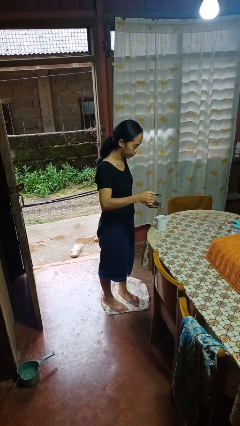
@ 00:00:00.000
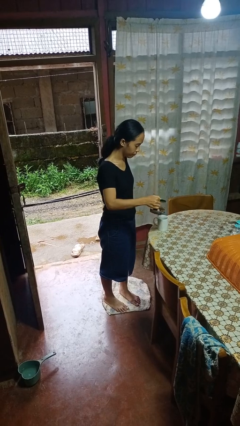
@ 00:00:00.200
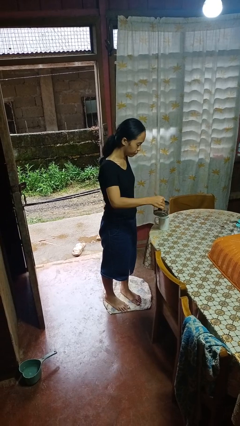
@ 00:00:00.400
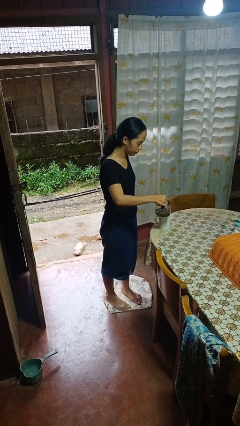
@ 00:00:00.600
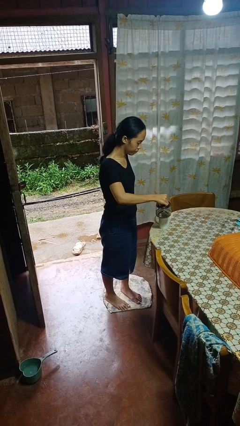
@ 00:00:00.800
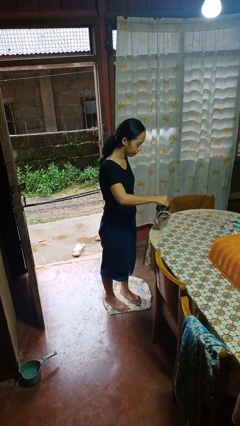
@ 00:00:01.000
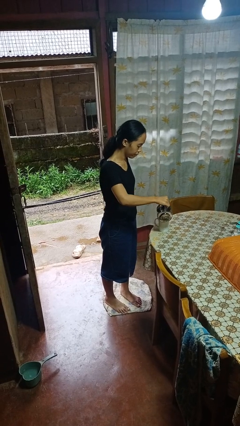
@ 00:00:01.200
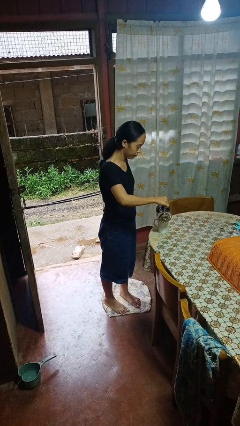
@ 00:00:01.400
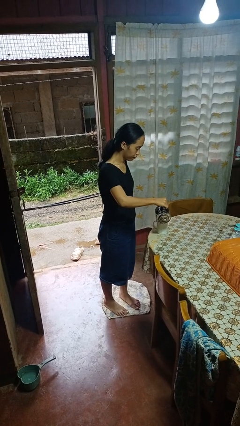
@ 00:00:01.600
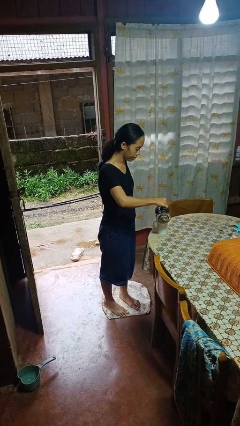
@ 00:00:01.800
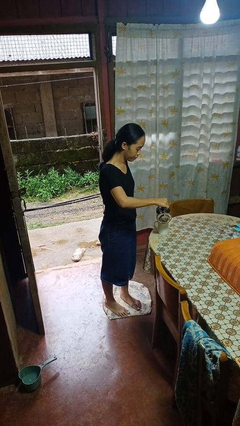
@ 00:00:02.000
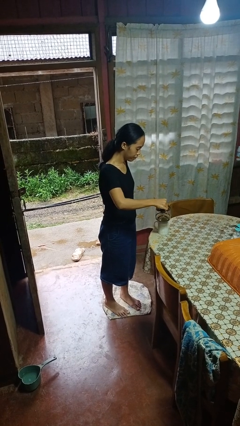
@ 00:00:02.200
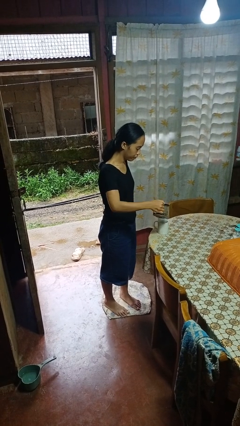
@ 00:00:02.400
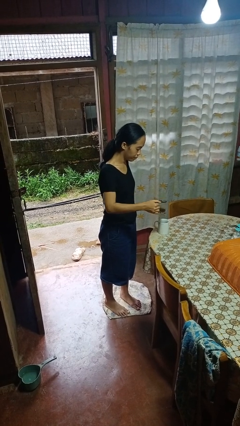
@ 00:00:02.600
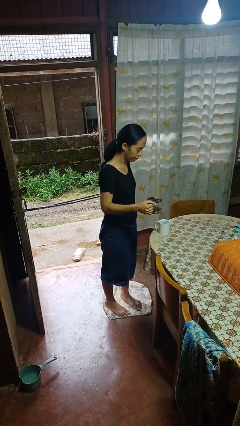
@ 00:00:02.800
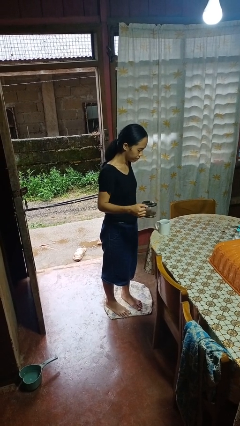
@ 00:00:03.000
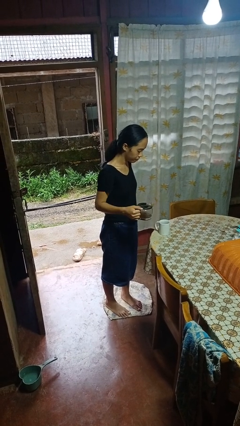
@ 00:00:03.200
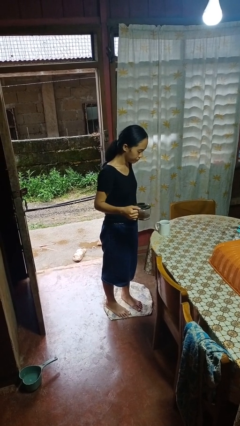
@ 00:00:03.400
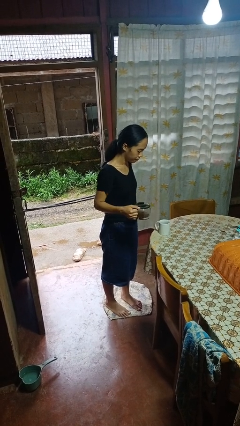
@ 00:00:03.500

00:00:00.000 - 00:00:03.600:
person pours coffee into mug

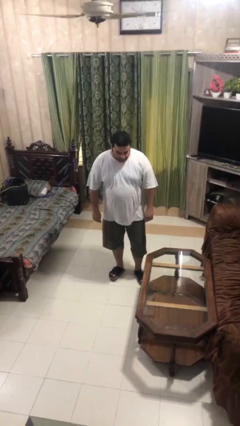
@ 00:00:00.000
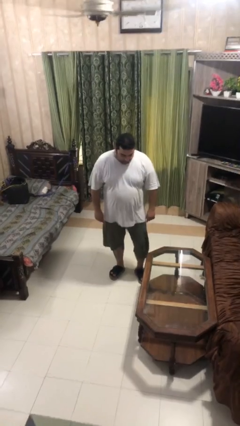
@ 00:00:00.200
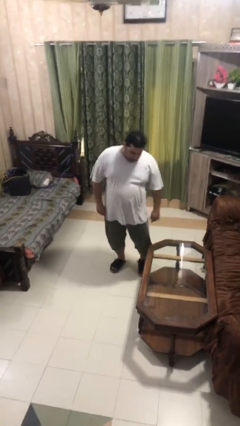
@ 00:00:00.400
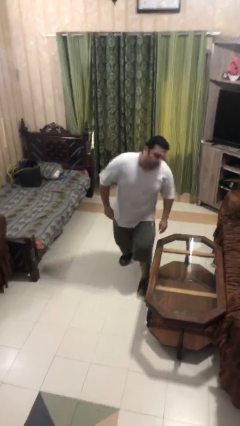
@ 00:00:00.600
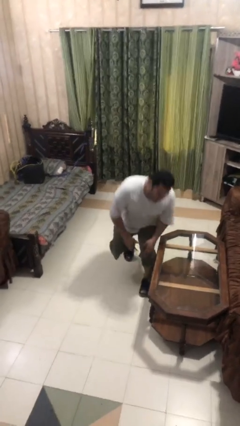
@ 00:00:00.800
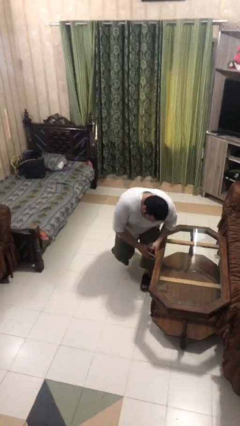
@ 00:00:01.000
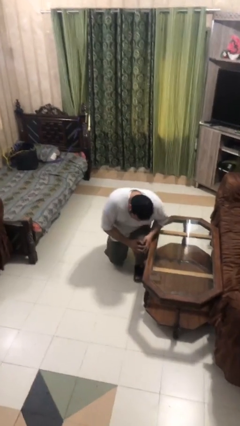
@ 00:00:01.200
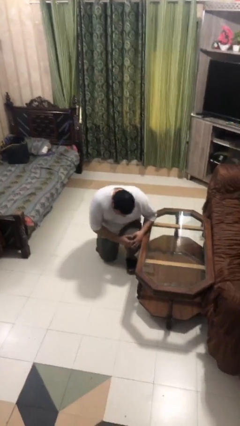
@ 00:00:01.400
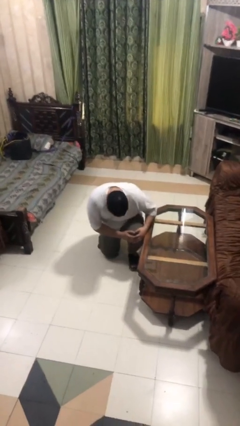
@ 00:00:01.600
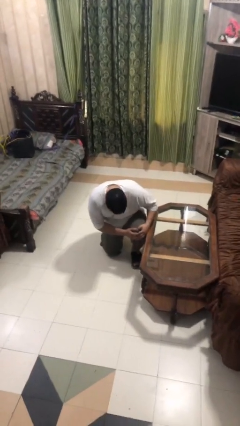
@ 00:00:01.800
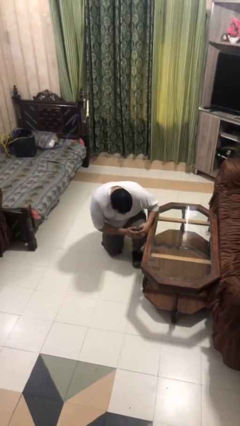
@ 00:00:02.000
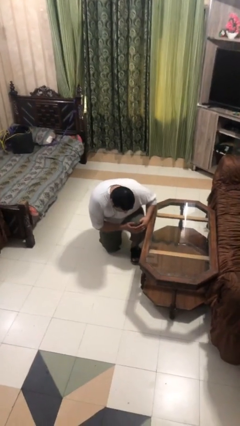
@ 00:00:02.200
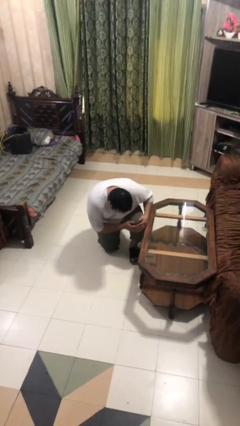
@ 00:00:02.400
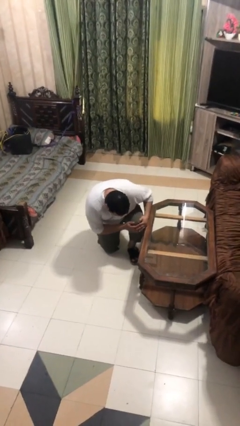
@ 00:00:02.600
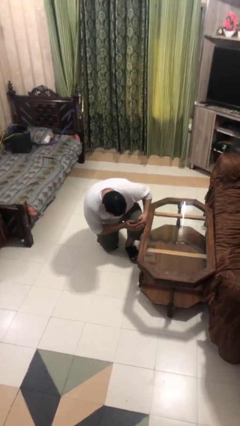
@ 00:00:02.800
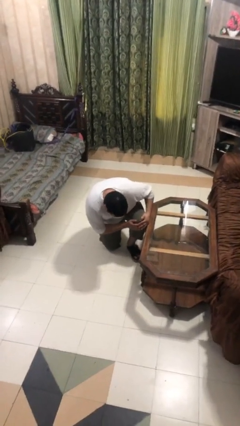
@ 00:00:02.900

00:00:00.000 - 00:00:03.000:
person trips on object on floor

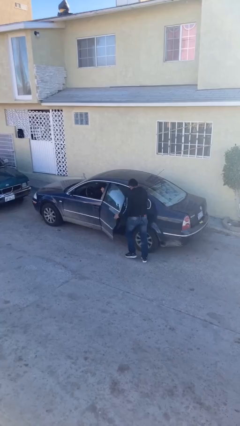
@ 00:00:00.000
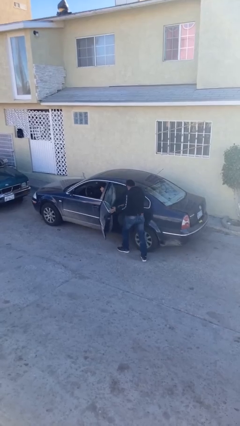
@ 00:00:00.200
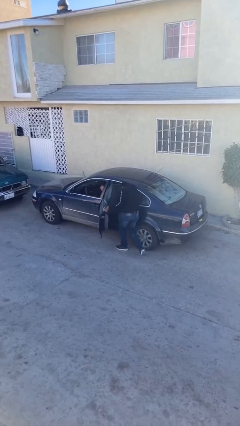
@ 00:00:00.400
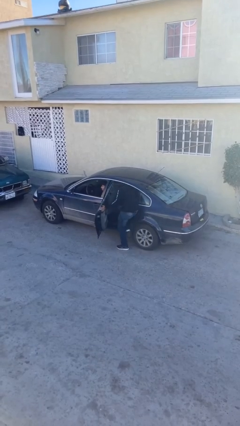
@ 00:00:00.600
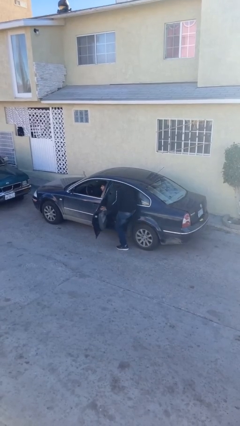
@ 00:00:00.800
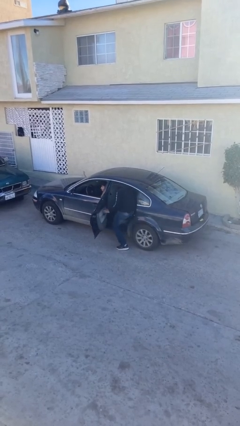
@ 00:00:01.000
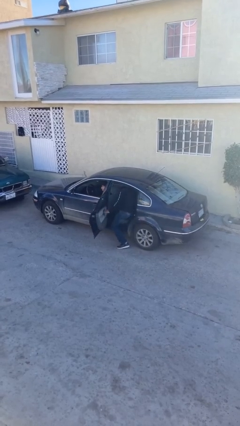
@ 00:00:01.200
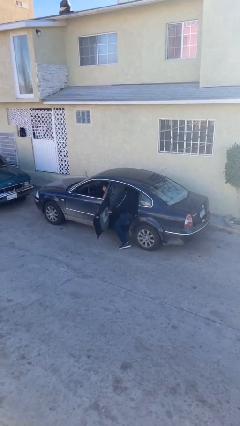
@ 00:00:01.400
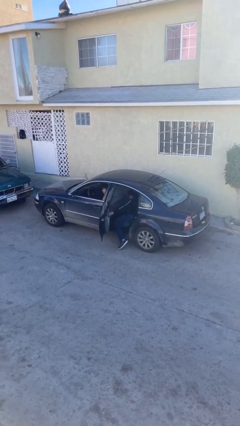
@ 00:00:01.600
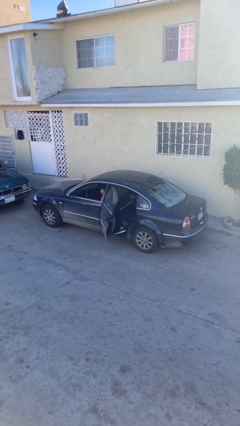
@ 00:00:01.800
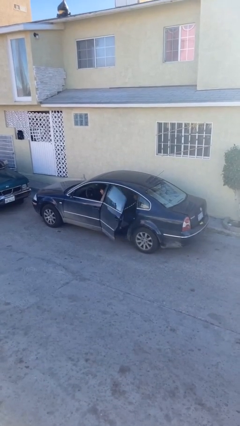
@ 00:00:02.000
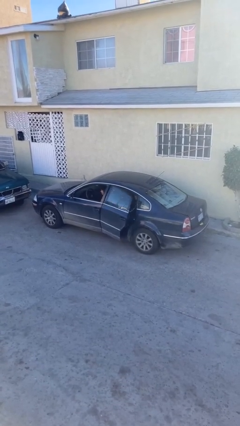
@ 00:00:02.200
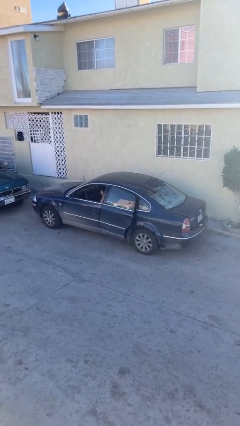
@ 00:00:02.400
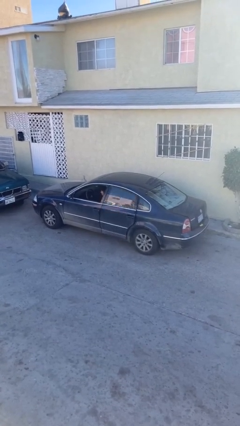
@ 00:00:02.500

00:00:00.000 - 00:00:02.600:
car picks up person

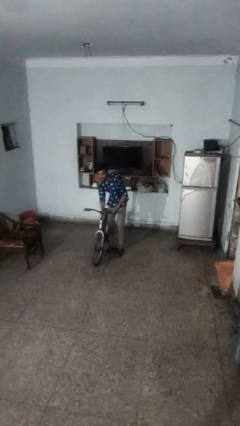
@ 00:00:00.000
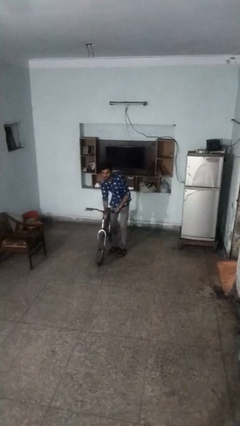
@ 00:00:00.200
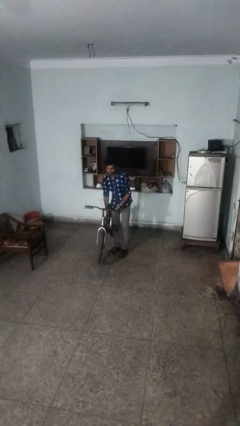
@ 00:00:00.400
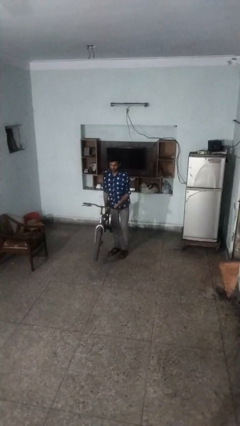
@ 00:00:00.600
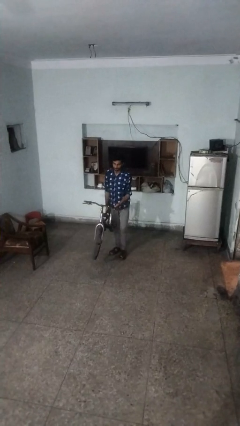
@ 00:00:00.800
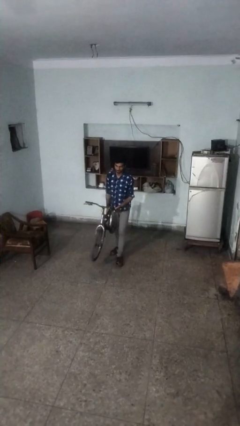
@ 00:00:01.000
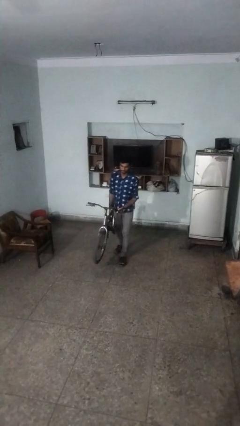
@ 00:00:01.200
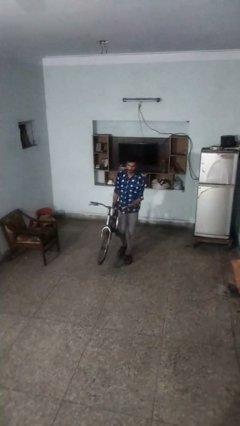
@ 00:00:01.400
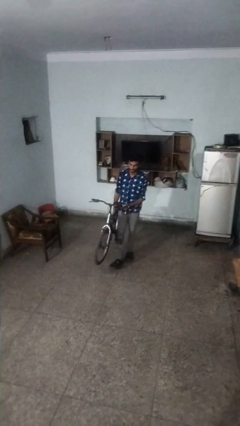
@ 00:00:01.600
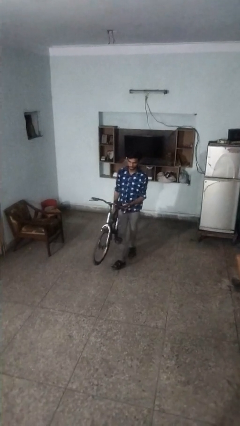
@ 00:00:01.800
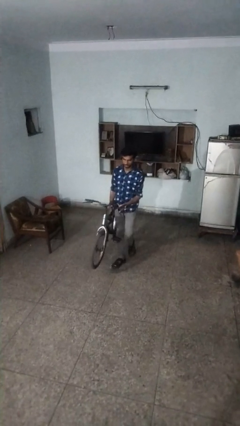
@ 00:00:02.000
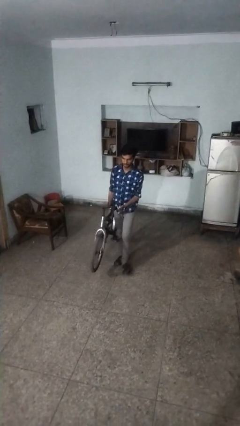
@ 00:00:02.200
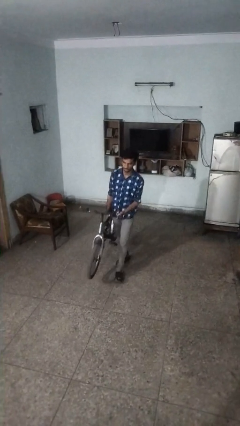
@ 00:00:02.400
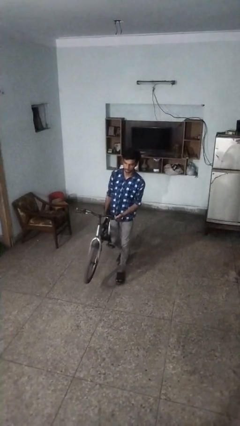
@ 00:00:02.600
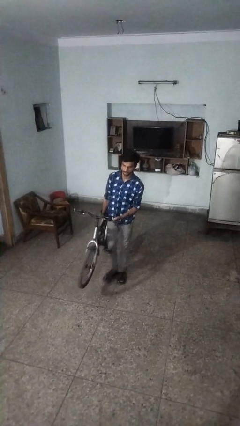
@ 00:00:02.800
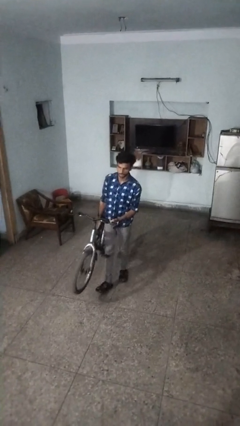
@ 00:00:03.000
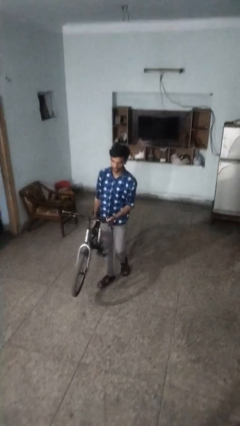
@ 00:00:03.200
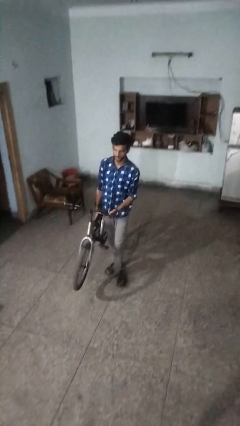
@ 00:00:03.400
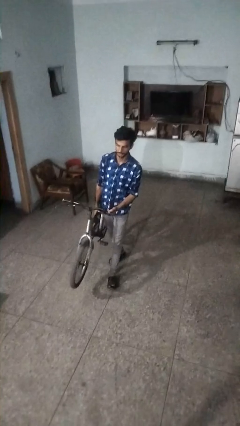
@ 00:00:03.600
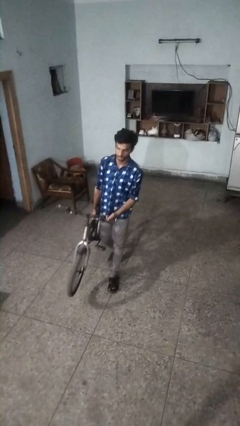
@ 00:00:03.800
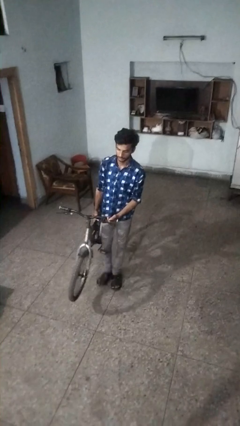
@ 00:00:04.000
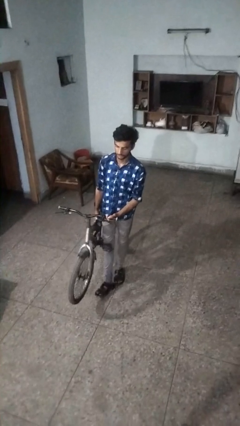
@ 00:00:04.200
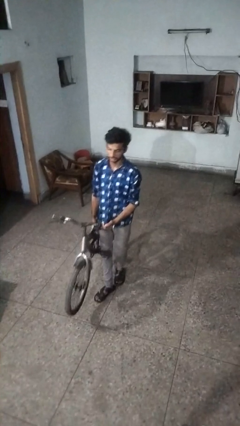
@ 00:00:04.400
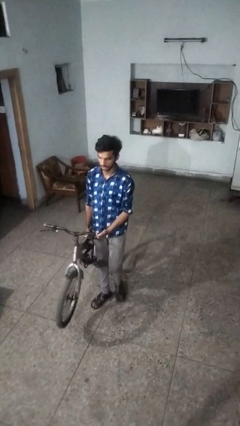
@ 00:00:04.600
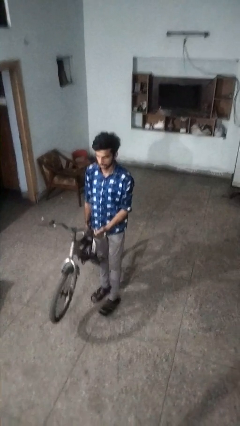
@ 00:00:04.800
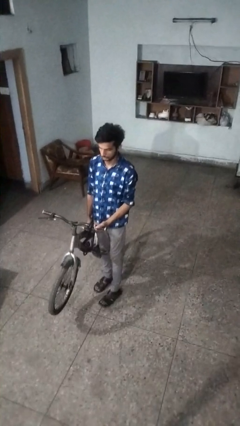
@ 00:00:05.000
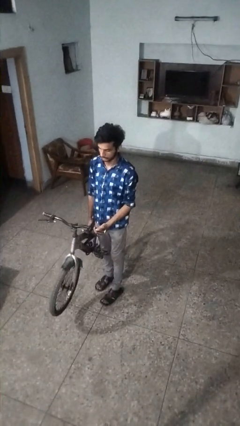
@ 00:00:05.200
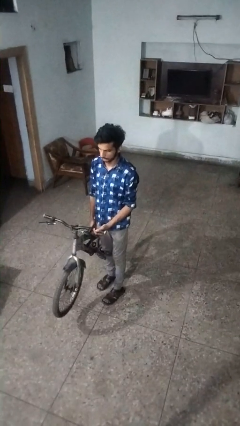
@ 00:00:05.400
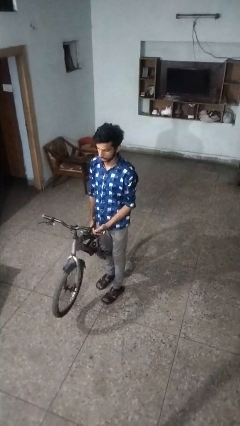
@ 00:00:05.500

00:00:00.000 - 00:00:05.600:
person carries bicycle

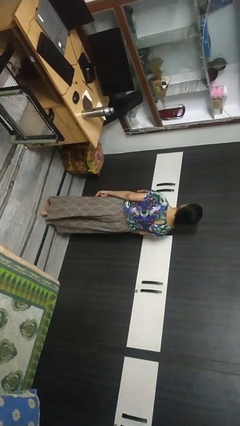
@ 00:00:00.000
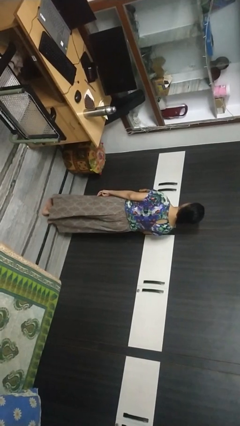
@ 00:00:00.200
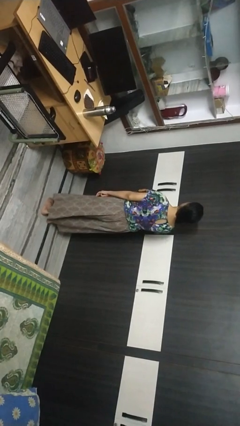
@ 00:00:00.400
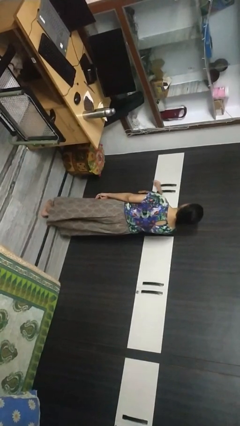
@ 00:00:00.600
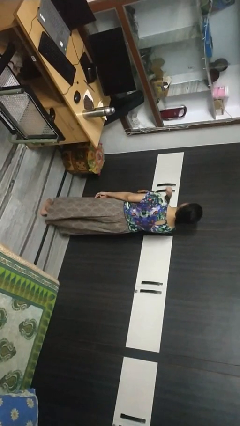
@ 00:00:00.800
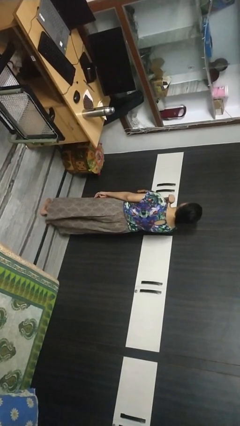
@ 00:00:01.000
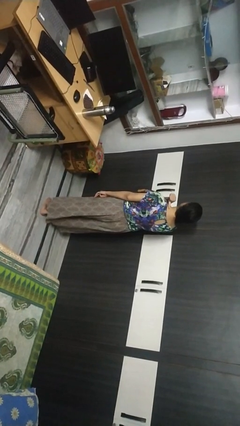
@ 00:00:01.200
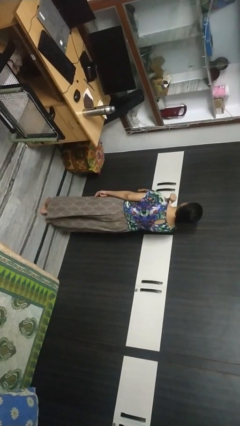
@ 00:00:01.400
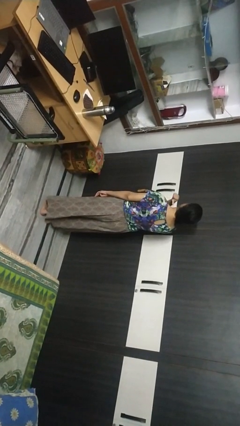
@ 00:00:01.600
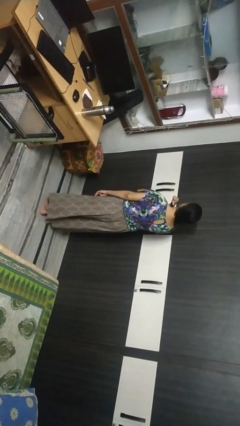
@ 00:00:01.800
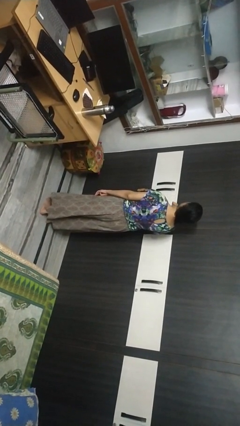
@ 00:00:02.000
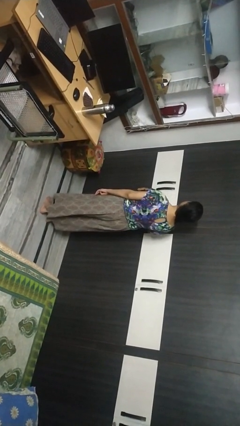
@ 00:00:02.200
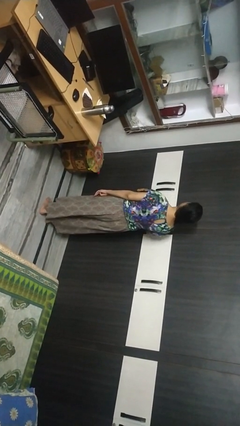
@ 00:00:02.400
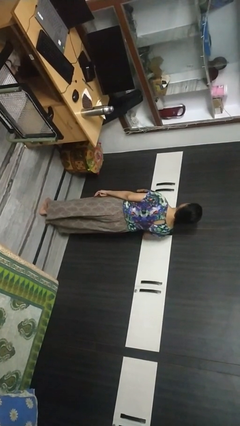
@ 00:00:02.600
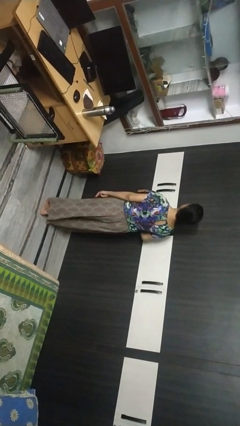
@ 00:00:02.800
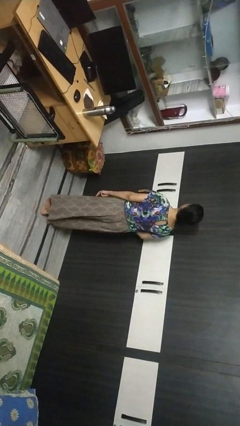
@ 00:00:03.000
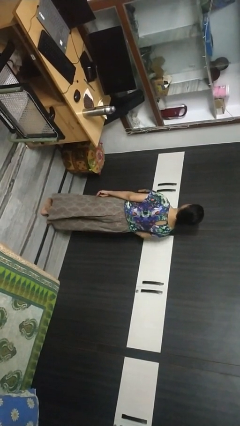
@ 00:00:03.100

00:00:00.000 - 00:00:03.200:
person gestures cut
